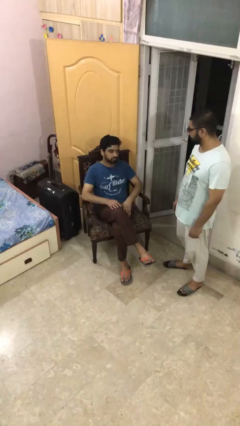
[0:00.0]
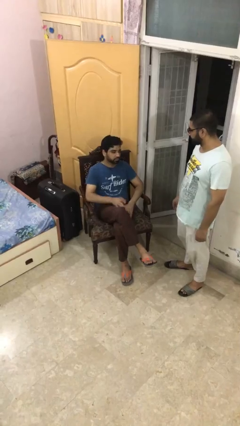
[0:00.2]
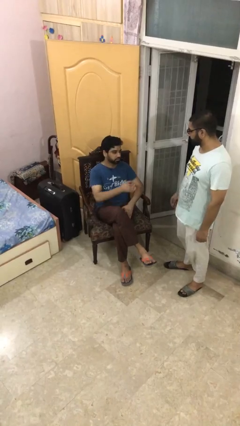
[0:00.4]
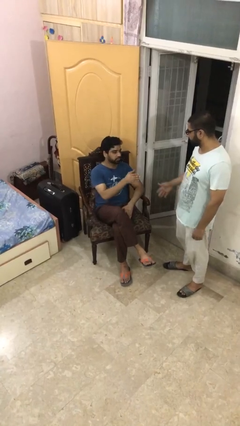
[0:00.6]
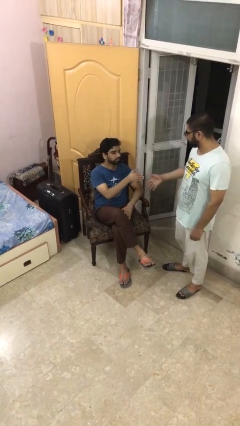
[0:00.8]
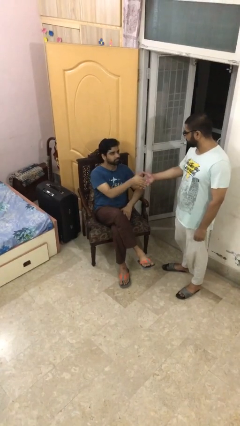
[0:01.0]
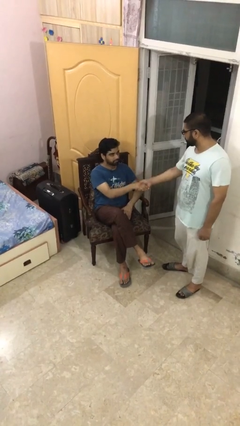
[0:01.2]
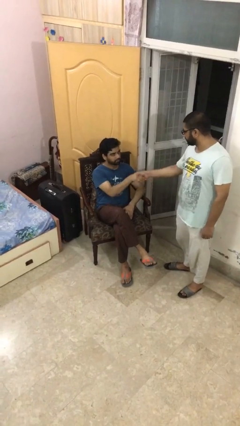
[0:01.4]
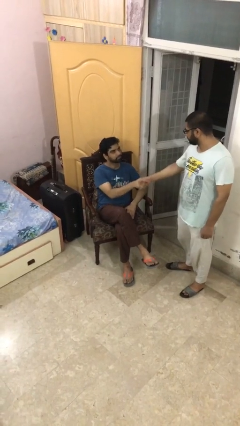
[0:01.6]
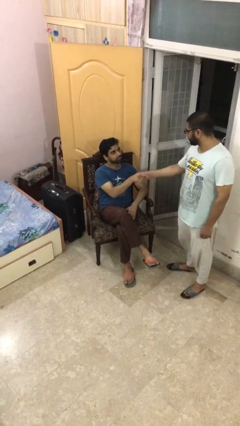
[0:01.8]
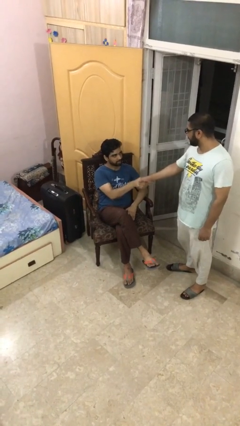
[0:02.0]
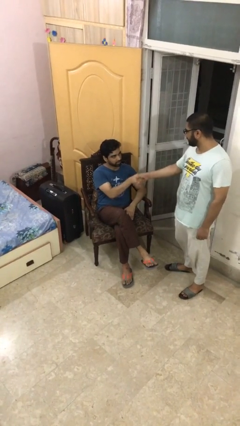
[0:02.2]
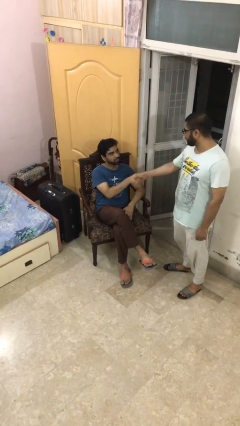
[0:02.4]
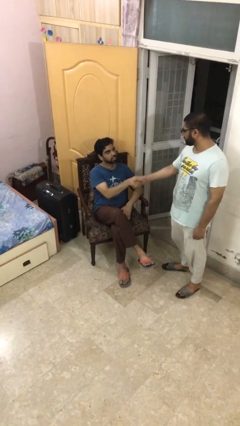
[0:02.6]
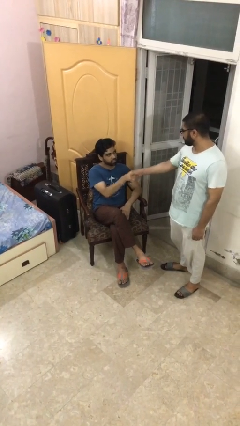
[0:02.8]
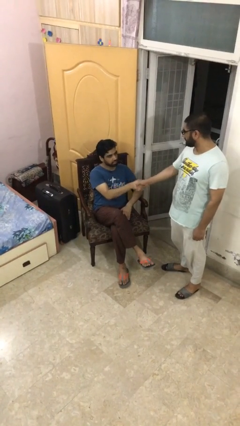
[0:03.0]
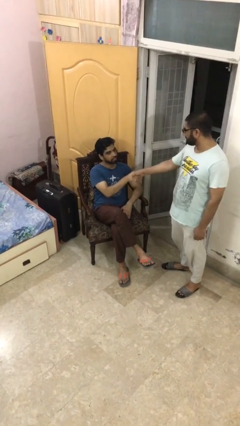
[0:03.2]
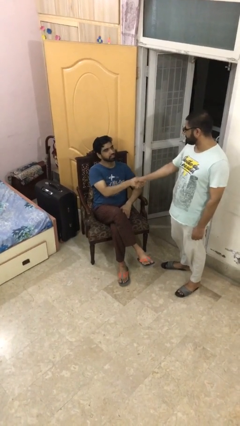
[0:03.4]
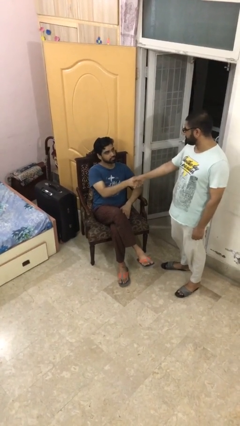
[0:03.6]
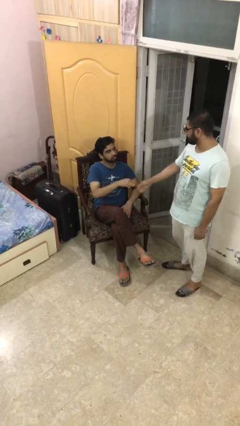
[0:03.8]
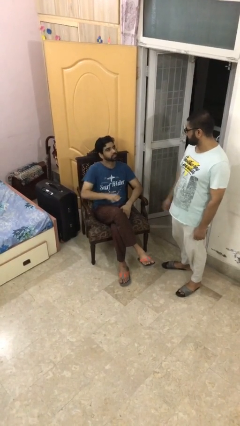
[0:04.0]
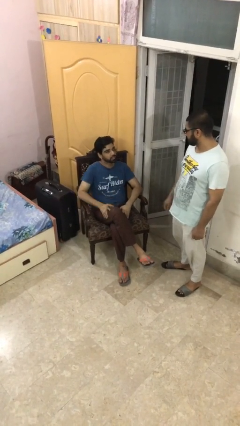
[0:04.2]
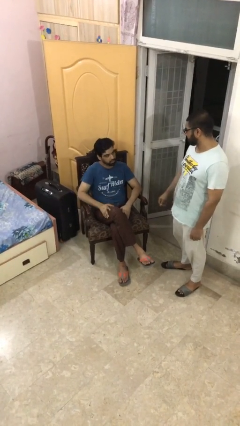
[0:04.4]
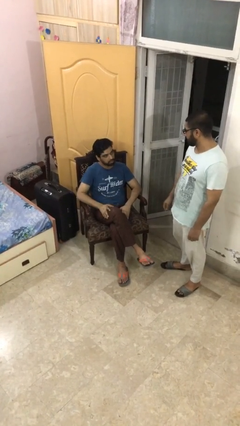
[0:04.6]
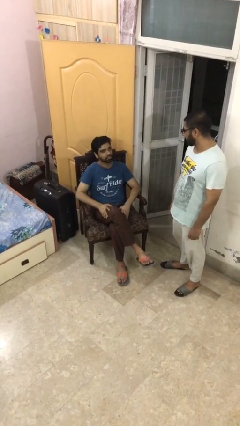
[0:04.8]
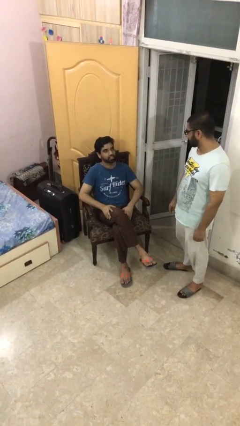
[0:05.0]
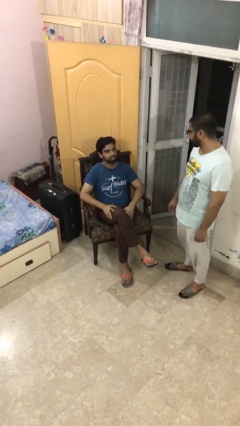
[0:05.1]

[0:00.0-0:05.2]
person shakes hand

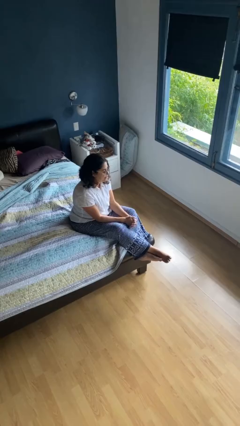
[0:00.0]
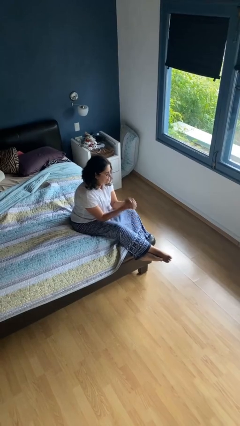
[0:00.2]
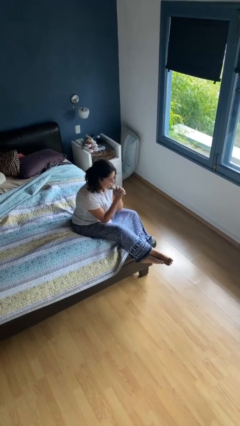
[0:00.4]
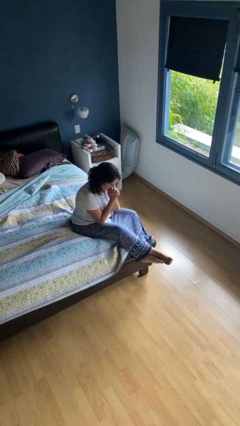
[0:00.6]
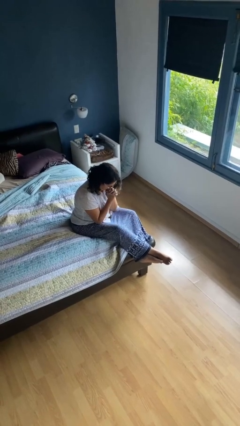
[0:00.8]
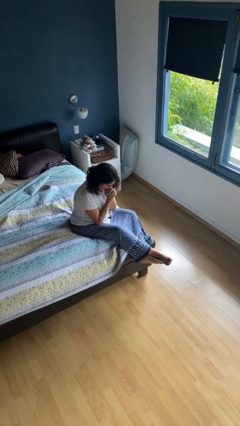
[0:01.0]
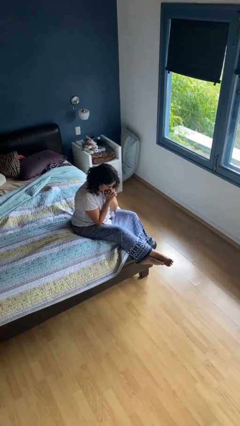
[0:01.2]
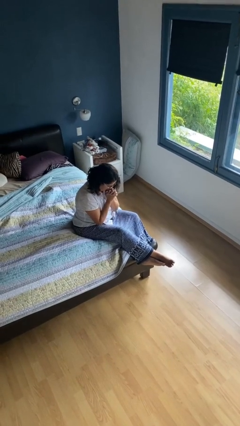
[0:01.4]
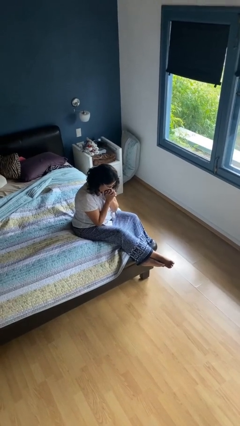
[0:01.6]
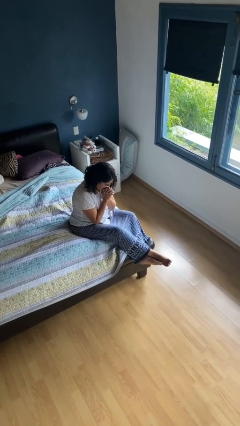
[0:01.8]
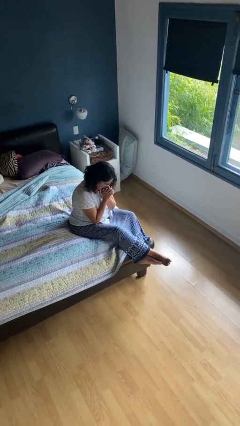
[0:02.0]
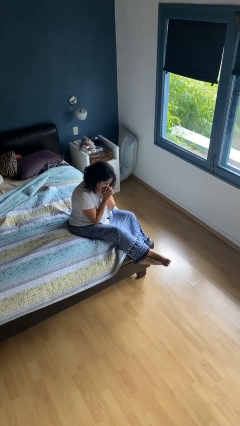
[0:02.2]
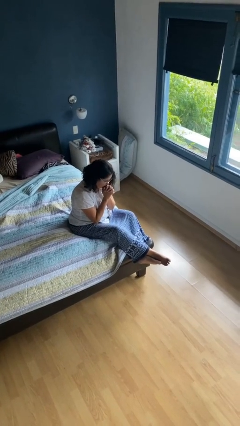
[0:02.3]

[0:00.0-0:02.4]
person prays

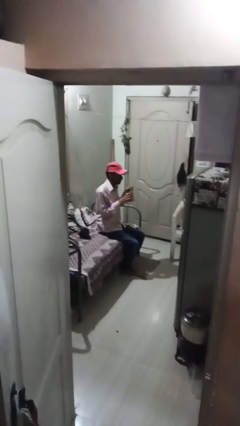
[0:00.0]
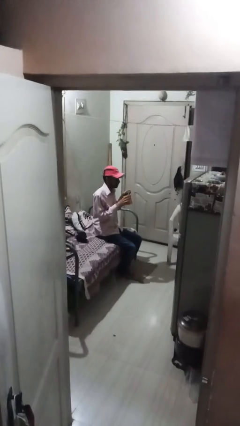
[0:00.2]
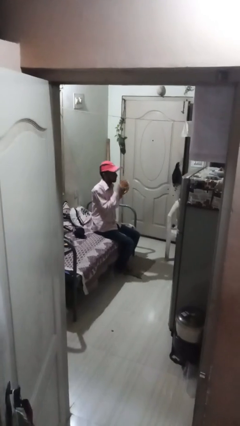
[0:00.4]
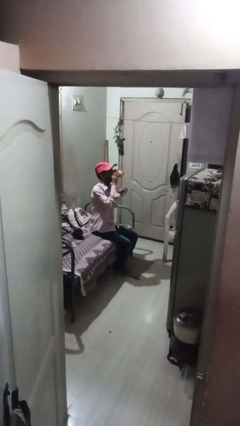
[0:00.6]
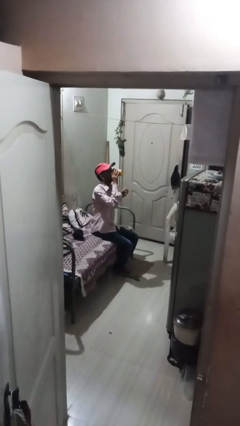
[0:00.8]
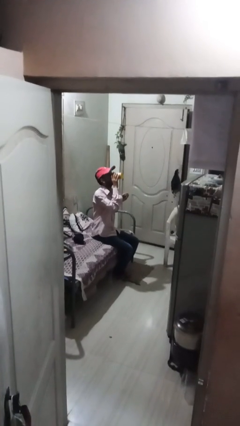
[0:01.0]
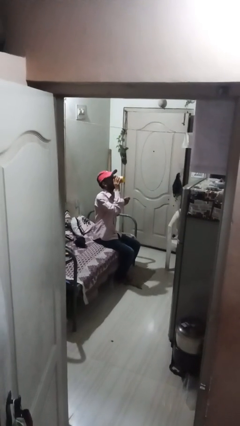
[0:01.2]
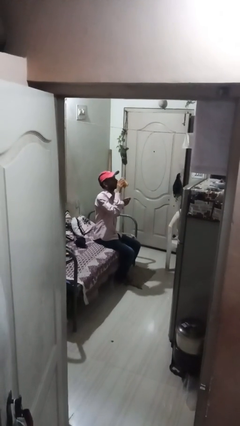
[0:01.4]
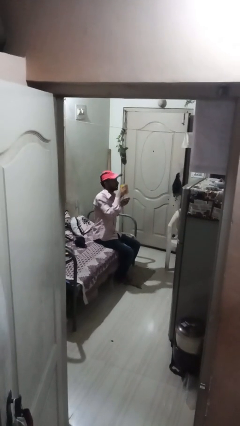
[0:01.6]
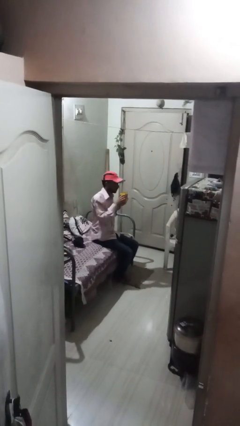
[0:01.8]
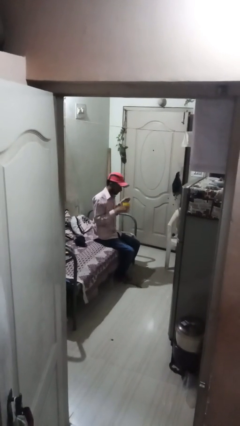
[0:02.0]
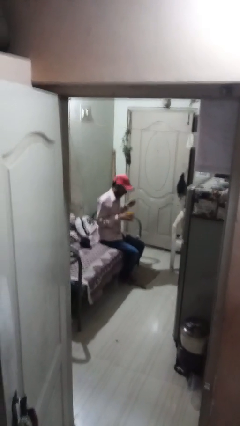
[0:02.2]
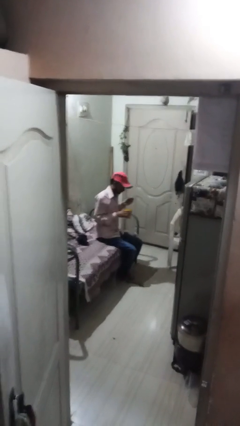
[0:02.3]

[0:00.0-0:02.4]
person drinks from mug

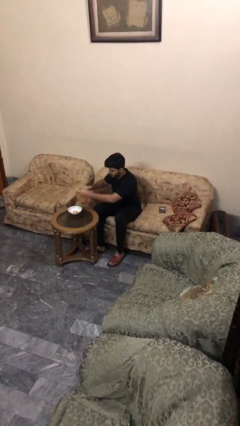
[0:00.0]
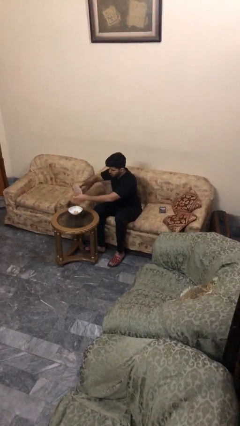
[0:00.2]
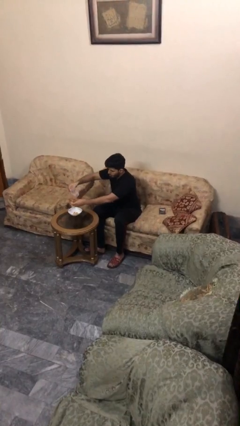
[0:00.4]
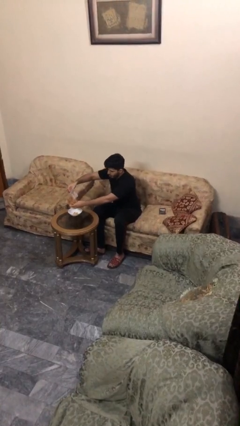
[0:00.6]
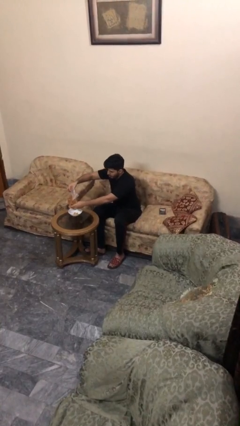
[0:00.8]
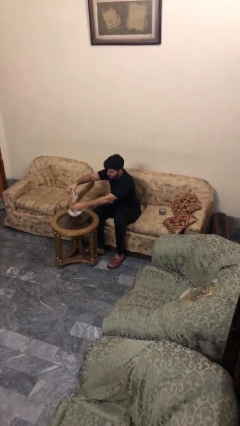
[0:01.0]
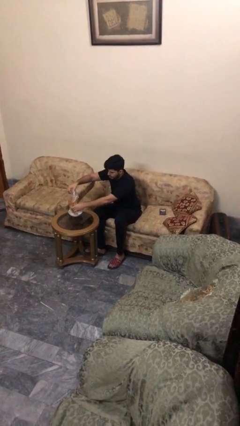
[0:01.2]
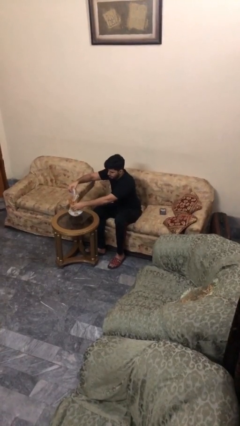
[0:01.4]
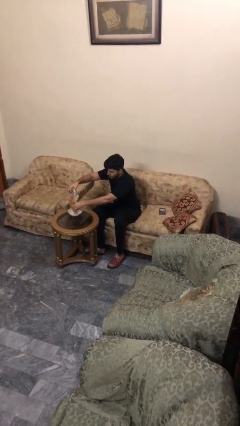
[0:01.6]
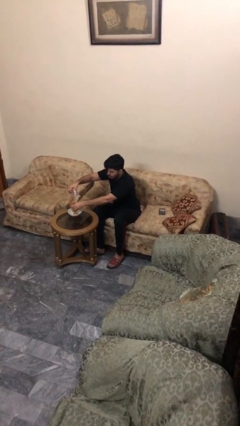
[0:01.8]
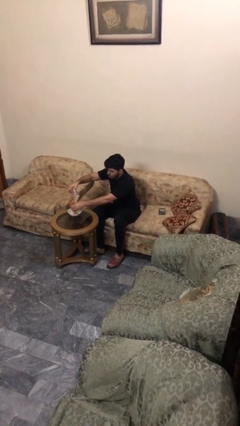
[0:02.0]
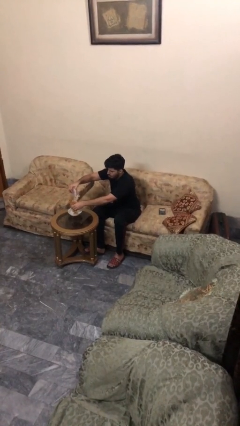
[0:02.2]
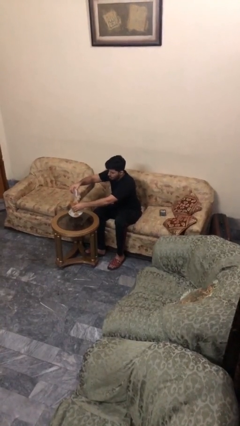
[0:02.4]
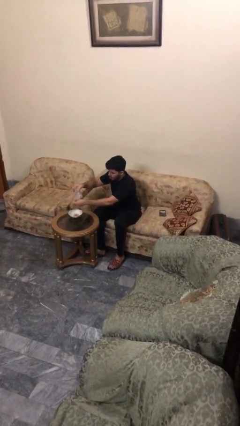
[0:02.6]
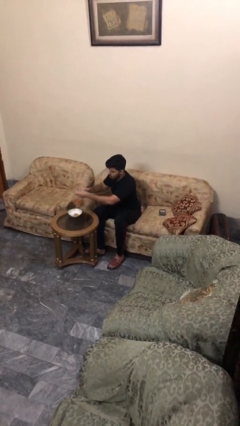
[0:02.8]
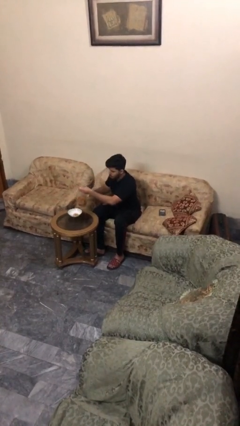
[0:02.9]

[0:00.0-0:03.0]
person pours into bowl

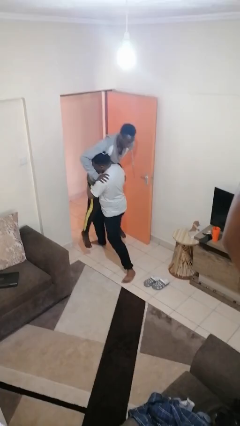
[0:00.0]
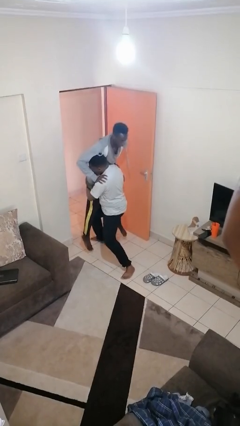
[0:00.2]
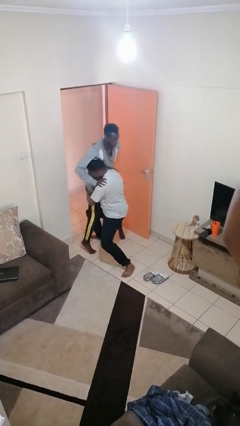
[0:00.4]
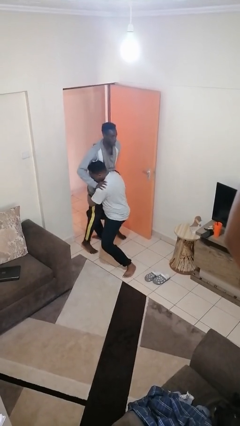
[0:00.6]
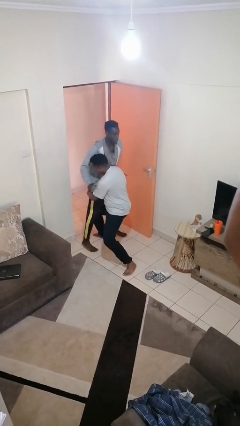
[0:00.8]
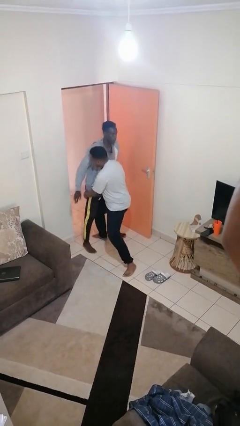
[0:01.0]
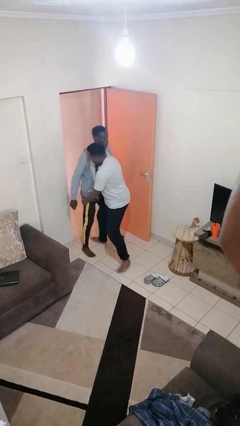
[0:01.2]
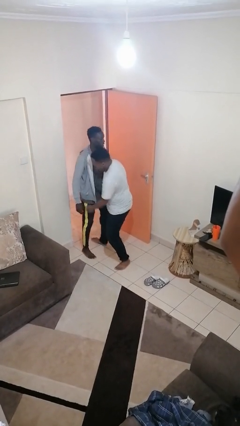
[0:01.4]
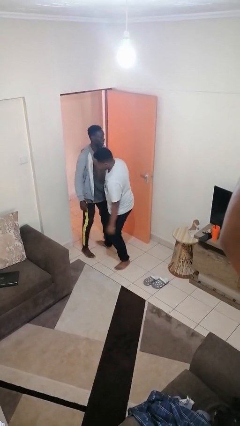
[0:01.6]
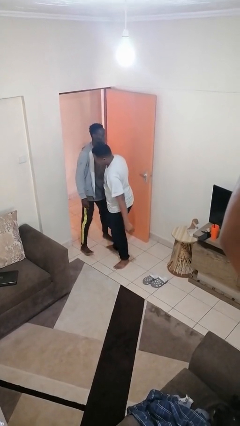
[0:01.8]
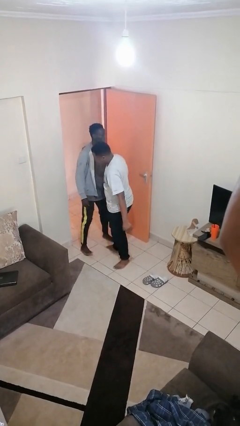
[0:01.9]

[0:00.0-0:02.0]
person puts down person

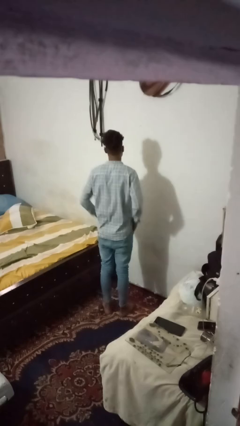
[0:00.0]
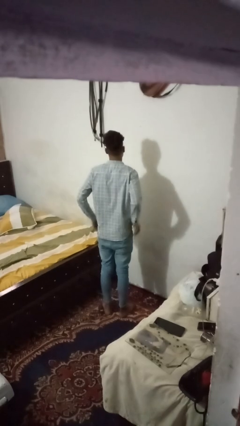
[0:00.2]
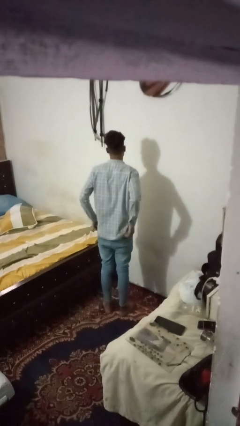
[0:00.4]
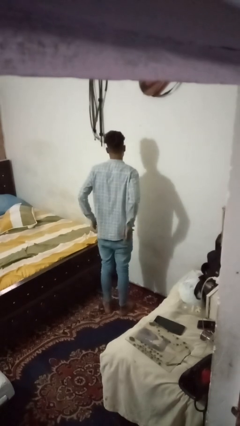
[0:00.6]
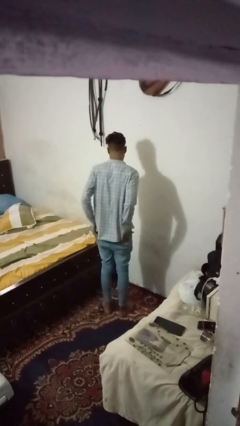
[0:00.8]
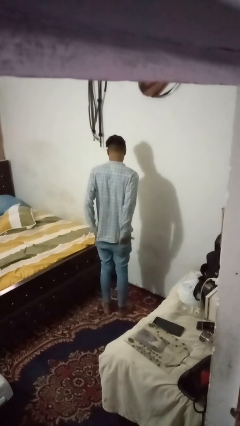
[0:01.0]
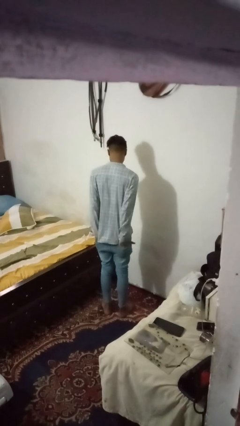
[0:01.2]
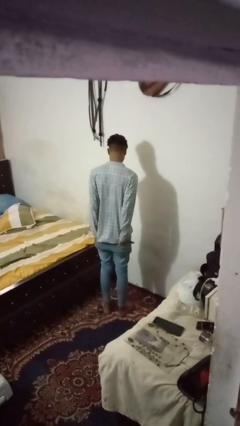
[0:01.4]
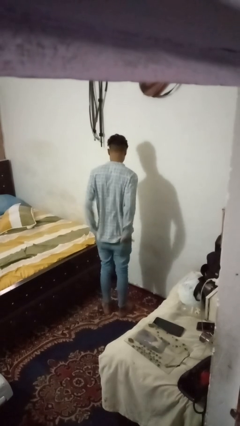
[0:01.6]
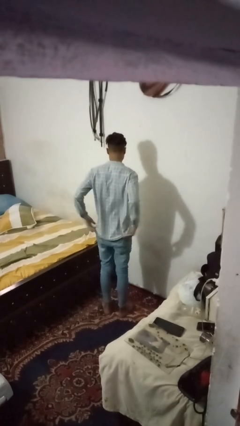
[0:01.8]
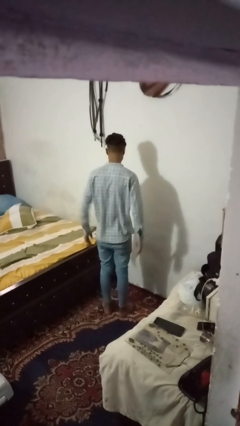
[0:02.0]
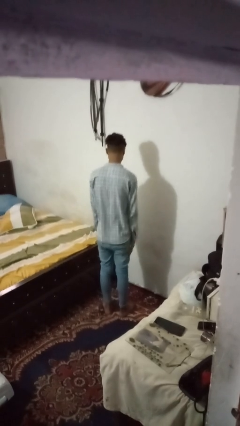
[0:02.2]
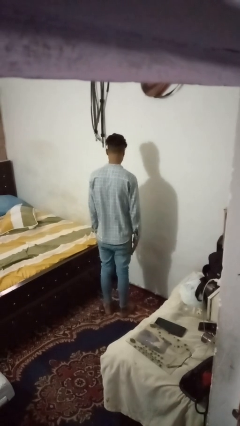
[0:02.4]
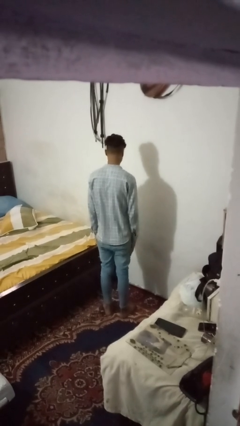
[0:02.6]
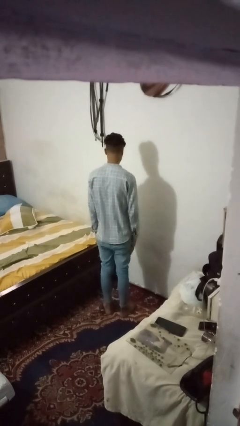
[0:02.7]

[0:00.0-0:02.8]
person puts hands in back pockets
